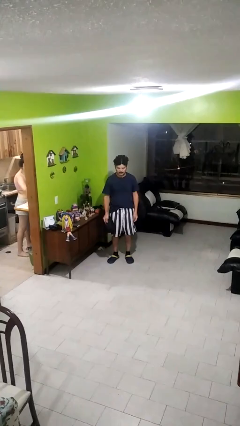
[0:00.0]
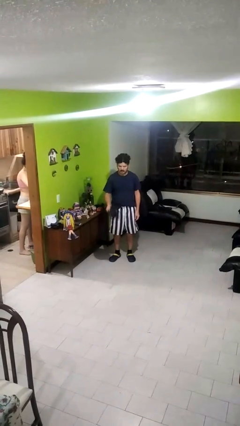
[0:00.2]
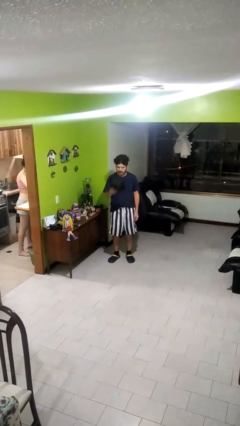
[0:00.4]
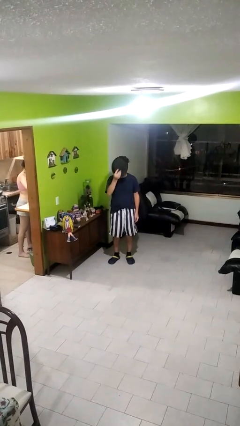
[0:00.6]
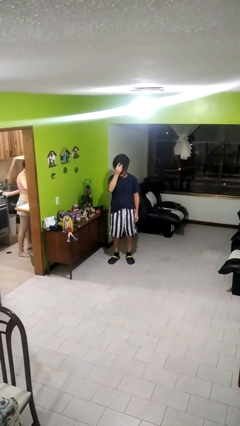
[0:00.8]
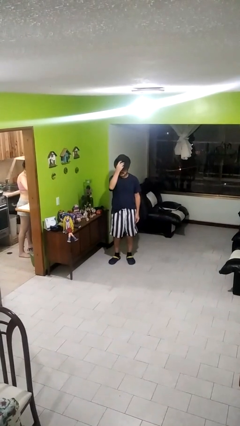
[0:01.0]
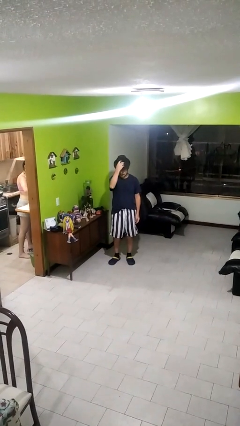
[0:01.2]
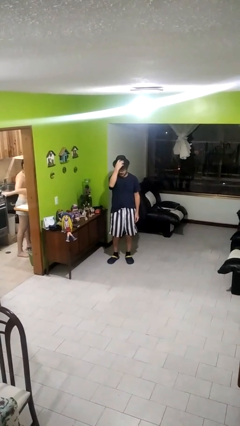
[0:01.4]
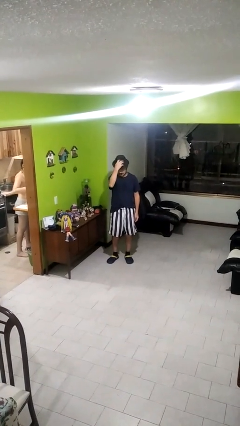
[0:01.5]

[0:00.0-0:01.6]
person puts on hat

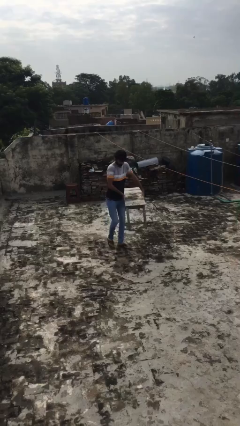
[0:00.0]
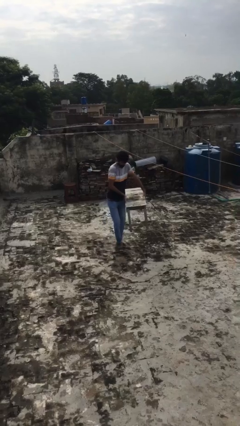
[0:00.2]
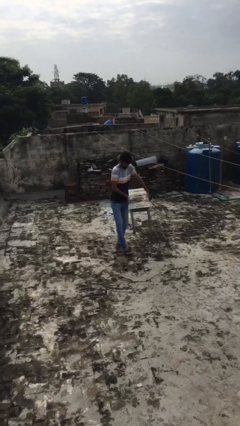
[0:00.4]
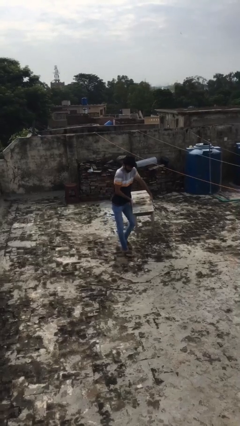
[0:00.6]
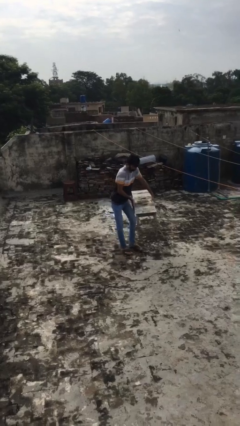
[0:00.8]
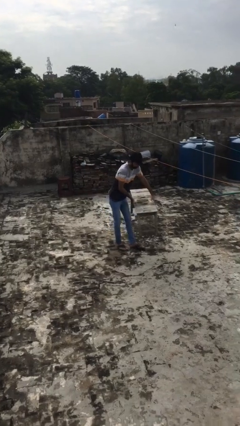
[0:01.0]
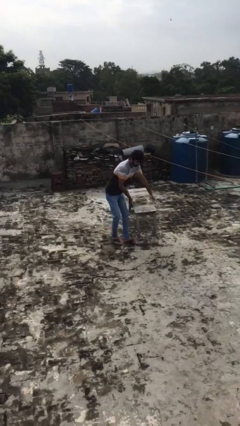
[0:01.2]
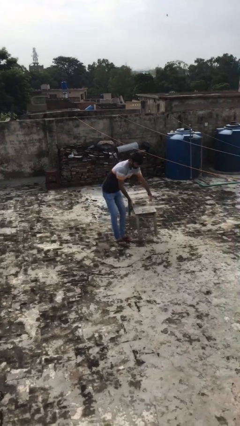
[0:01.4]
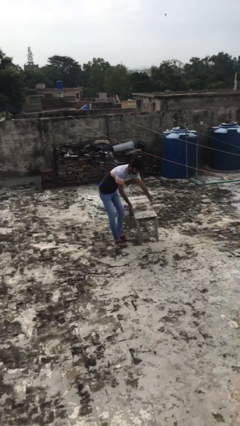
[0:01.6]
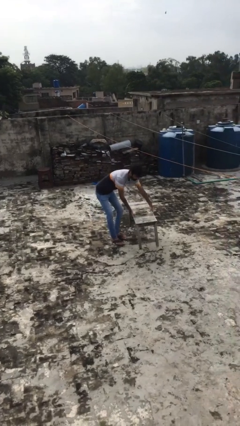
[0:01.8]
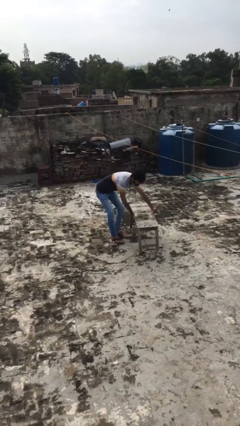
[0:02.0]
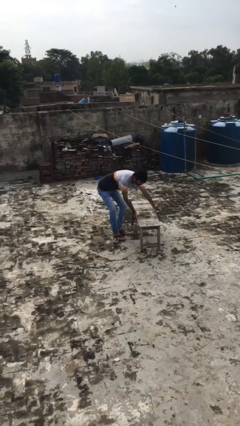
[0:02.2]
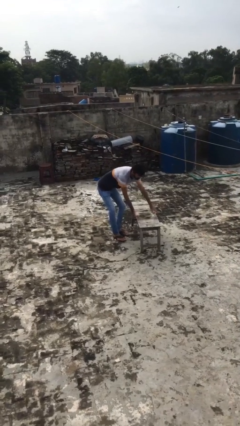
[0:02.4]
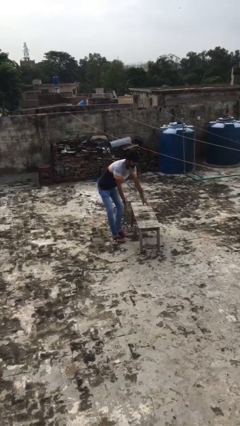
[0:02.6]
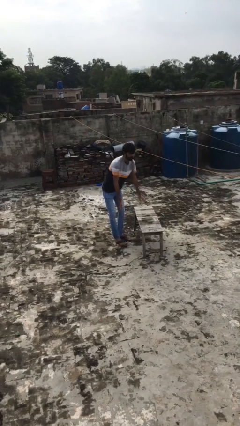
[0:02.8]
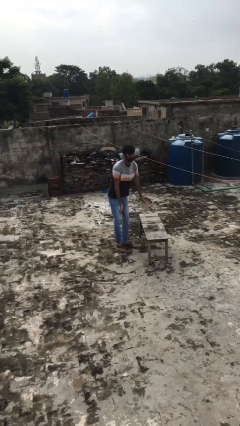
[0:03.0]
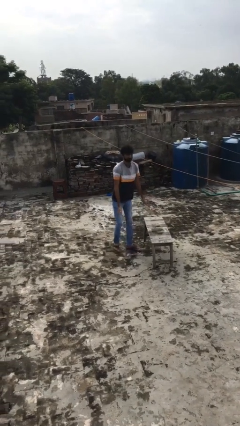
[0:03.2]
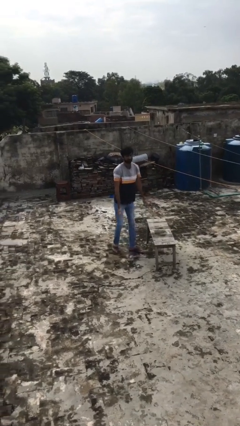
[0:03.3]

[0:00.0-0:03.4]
person puts down object on floor

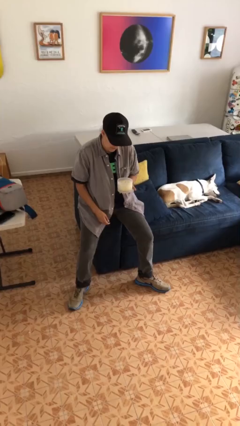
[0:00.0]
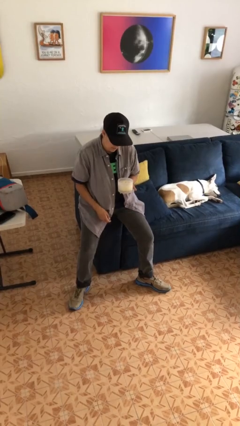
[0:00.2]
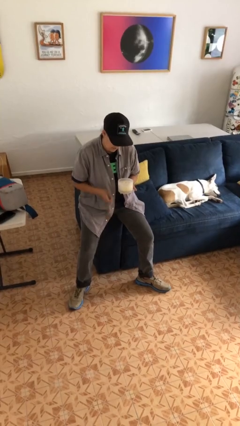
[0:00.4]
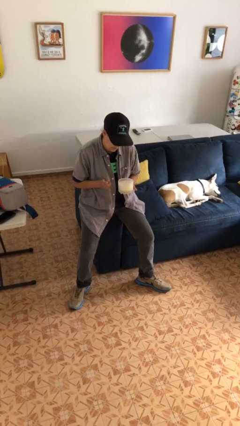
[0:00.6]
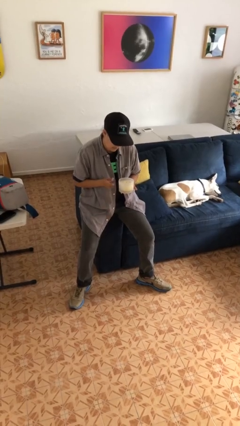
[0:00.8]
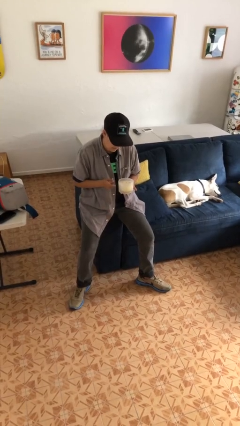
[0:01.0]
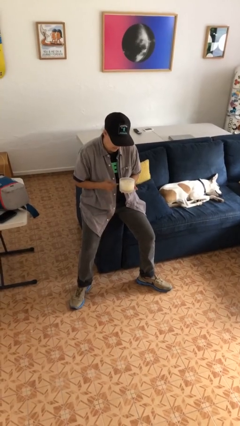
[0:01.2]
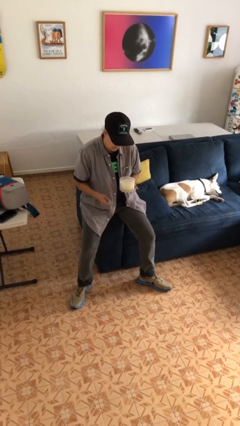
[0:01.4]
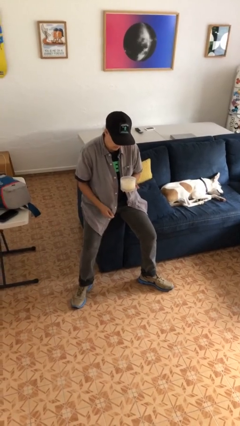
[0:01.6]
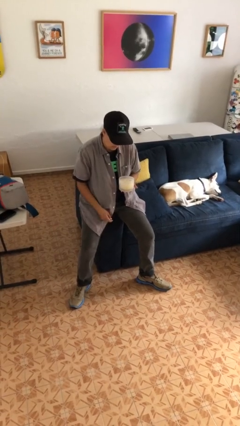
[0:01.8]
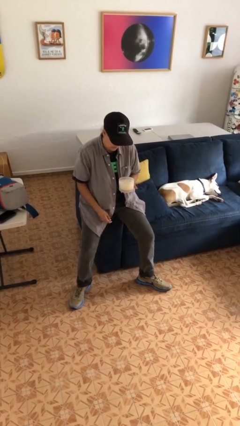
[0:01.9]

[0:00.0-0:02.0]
person taps object with finger

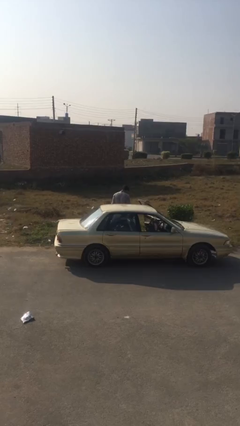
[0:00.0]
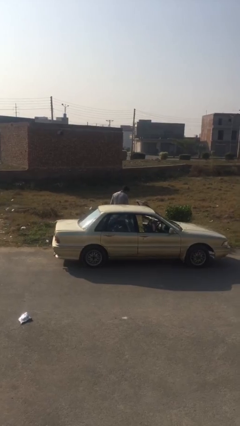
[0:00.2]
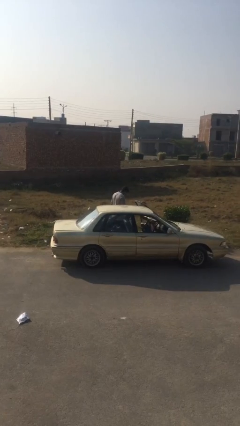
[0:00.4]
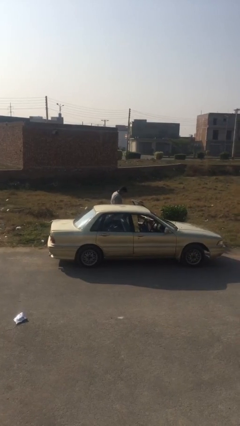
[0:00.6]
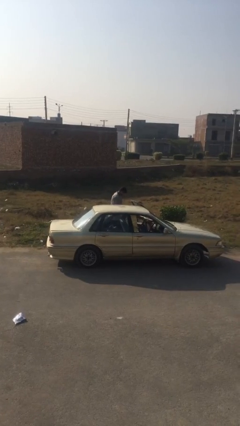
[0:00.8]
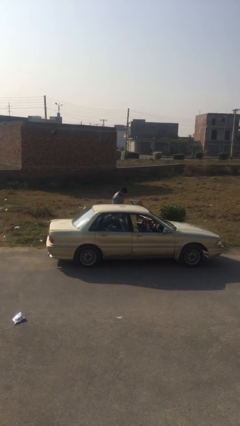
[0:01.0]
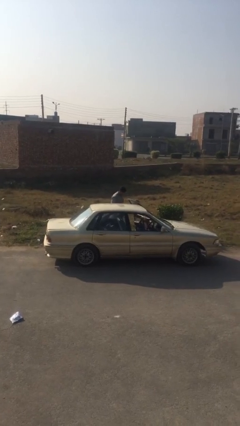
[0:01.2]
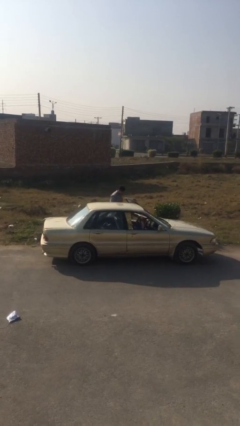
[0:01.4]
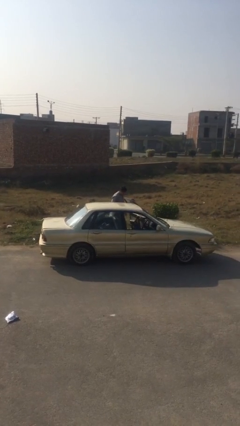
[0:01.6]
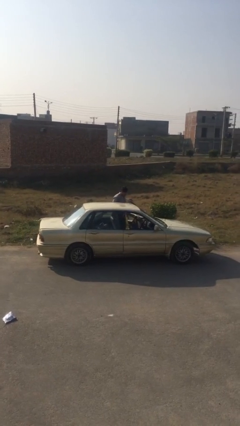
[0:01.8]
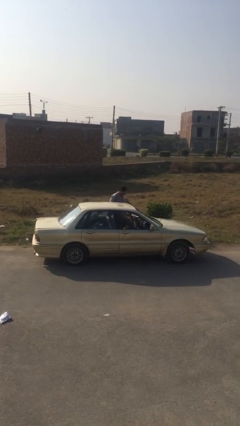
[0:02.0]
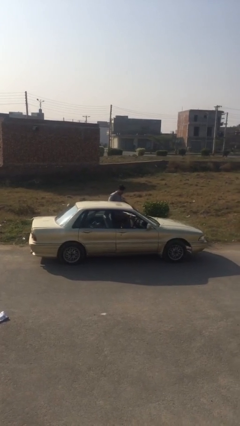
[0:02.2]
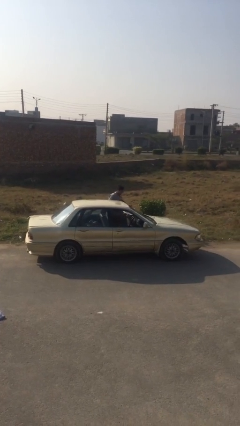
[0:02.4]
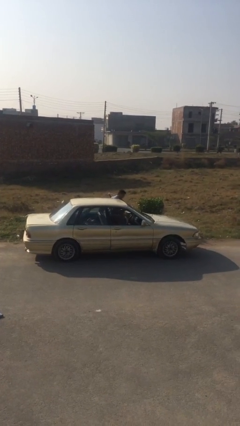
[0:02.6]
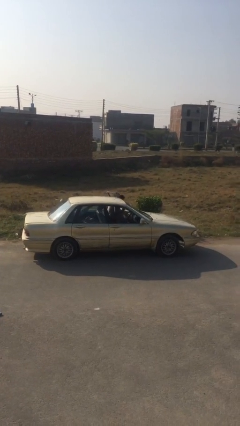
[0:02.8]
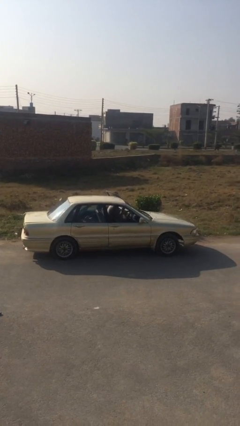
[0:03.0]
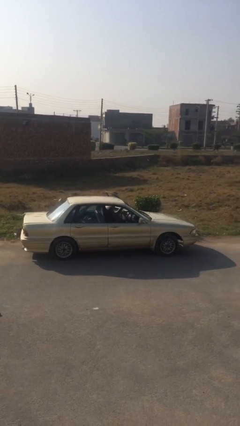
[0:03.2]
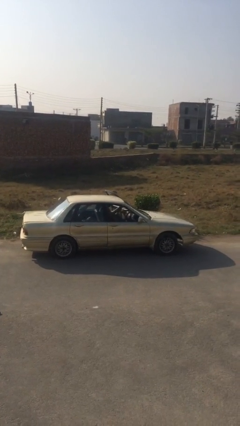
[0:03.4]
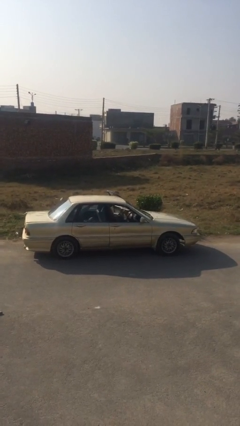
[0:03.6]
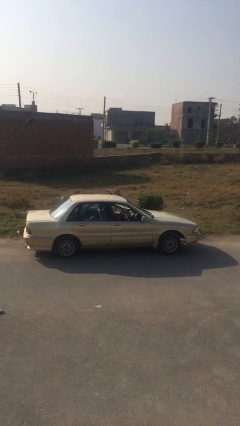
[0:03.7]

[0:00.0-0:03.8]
person enters car

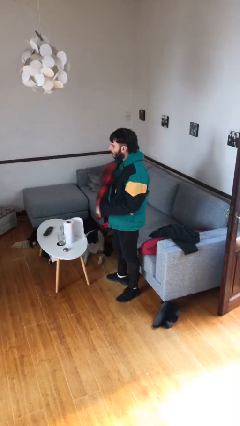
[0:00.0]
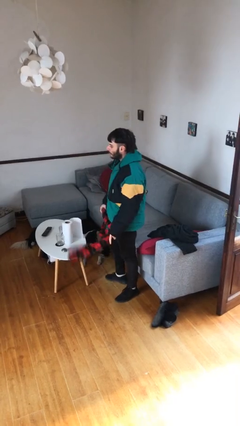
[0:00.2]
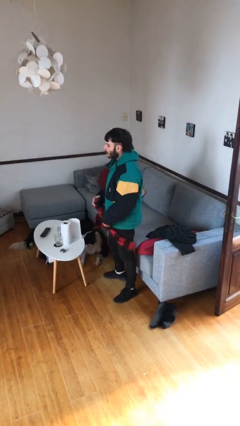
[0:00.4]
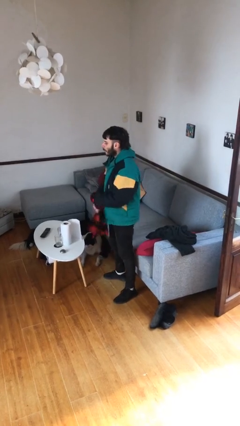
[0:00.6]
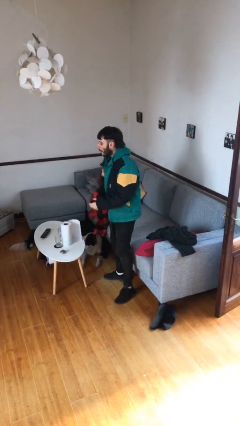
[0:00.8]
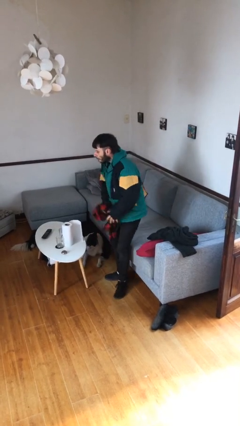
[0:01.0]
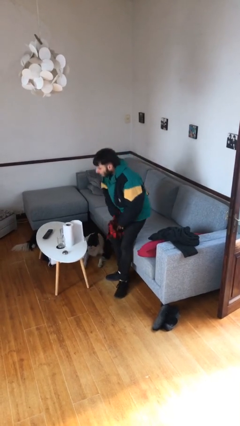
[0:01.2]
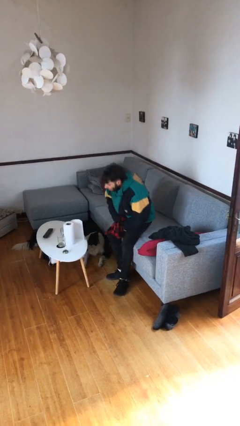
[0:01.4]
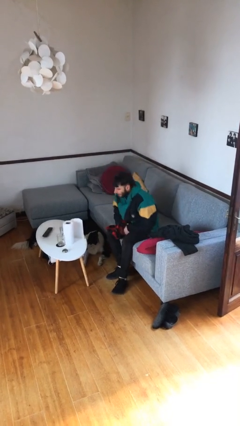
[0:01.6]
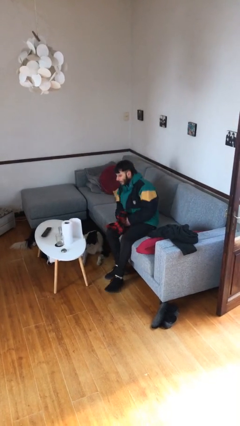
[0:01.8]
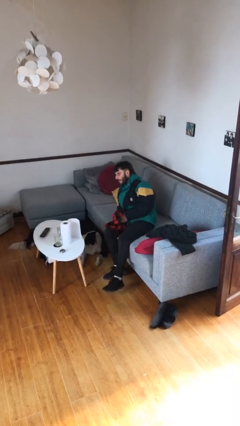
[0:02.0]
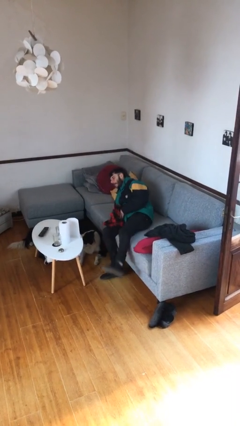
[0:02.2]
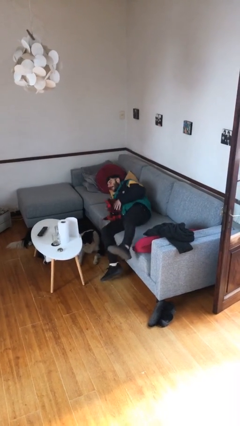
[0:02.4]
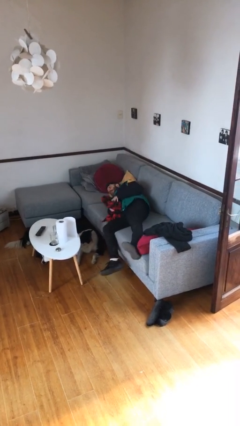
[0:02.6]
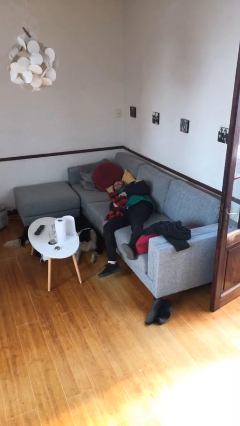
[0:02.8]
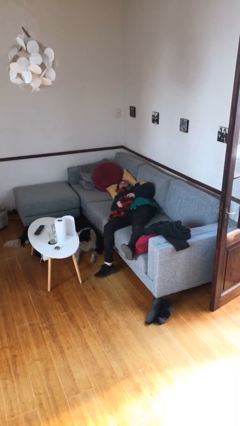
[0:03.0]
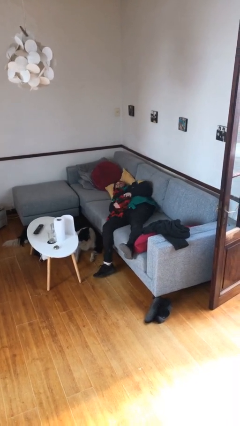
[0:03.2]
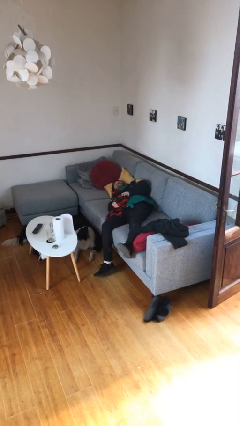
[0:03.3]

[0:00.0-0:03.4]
person lies down on couch

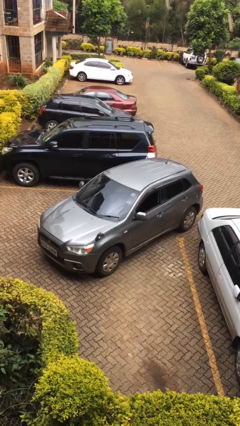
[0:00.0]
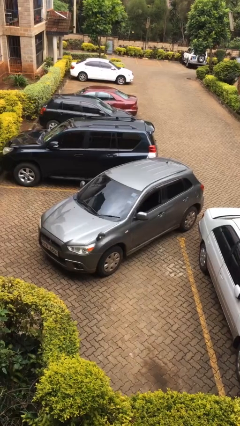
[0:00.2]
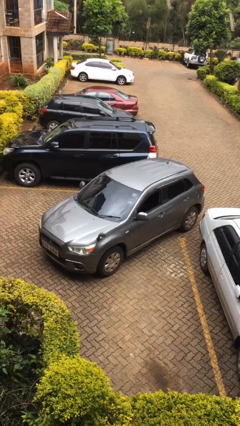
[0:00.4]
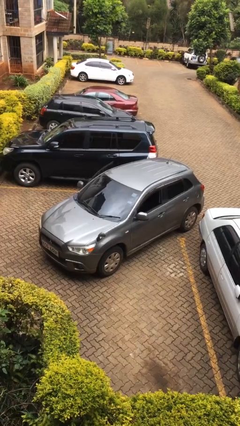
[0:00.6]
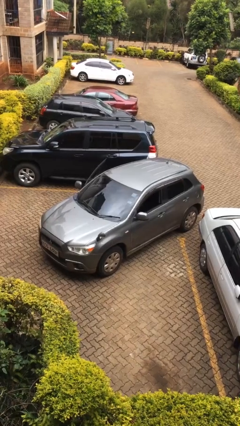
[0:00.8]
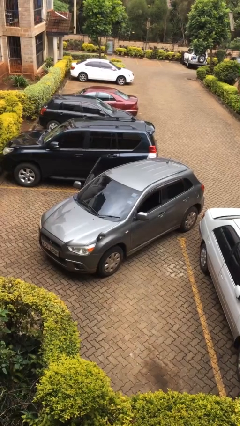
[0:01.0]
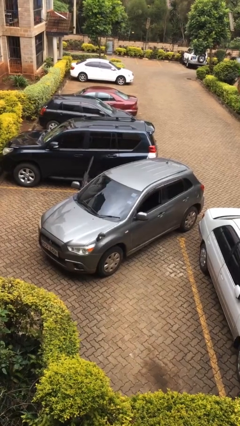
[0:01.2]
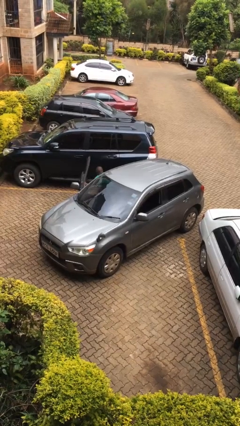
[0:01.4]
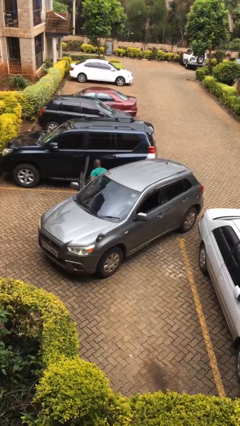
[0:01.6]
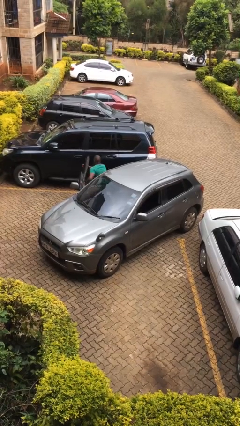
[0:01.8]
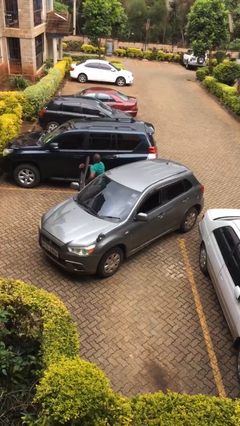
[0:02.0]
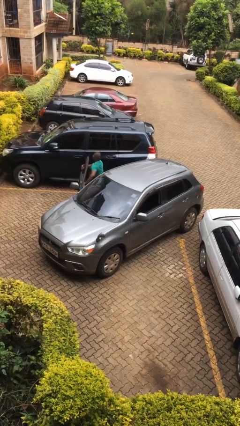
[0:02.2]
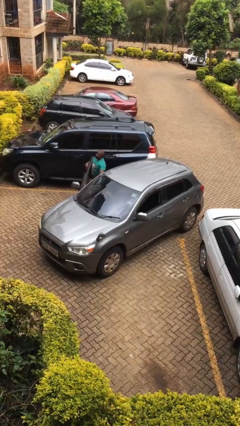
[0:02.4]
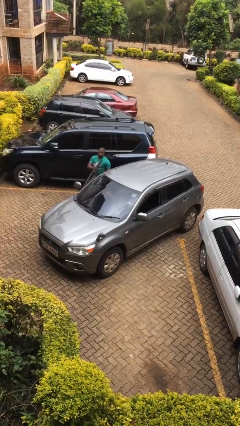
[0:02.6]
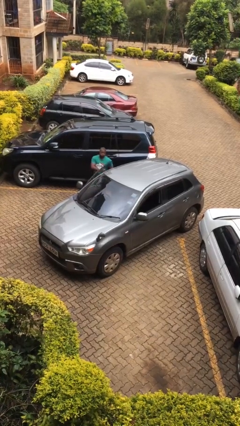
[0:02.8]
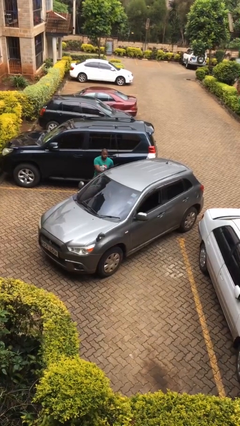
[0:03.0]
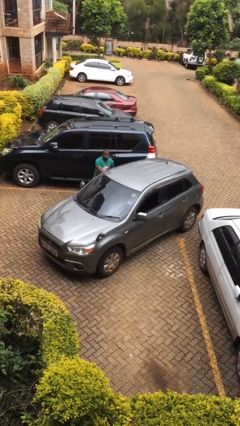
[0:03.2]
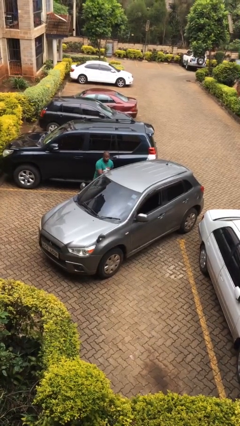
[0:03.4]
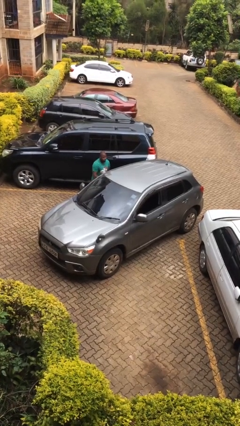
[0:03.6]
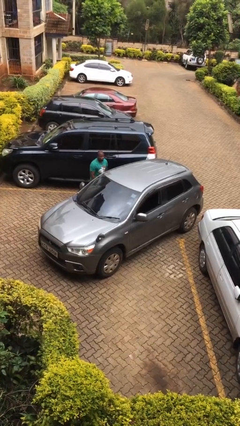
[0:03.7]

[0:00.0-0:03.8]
car drops off person

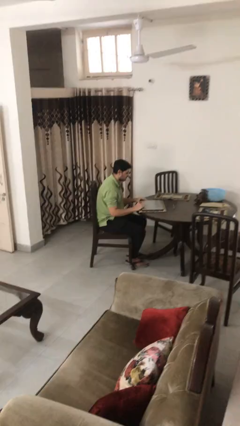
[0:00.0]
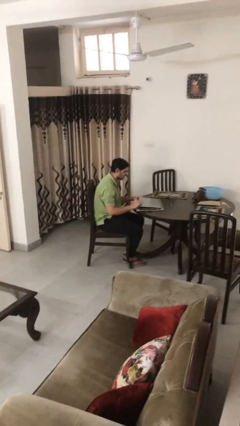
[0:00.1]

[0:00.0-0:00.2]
person interacts with laptop
